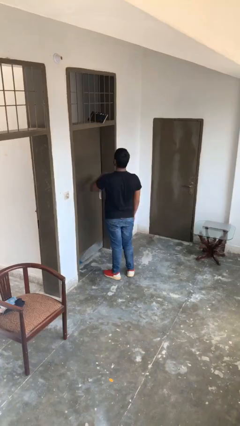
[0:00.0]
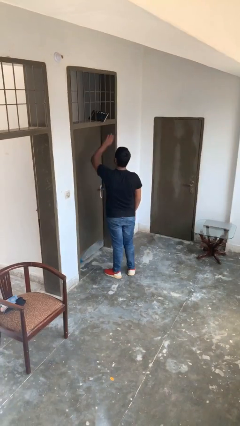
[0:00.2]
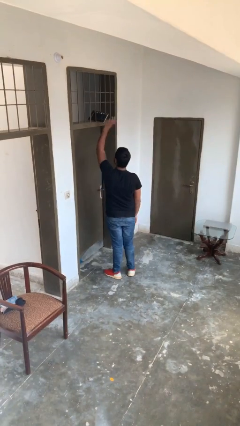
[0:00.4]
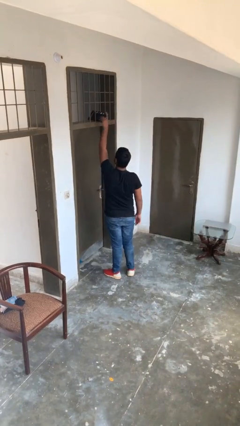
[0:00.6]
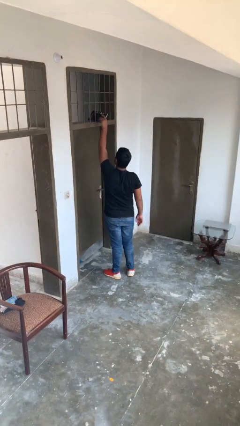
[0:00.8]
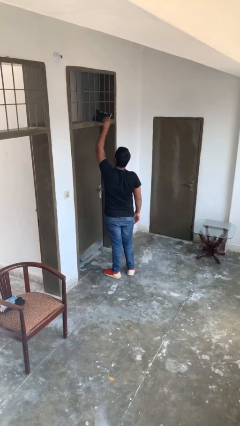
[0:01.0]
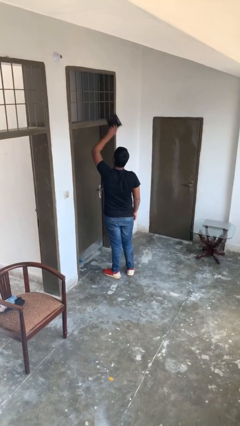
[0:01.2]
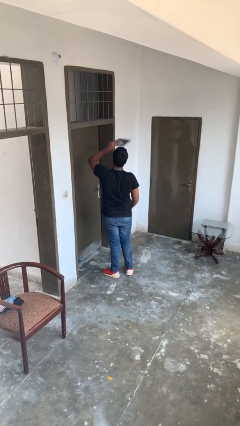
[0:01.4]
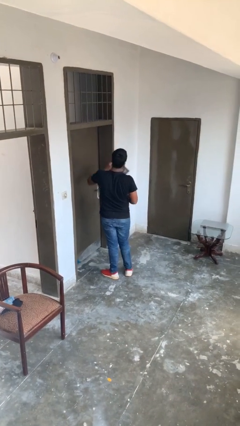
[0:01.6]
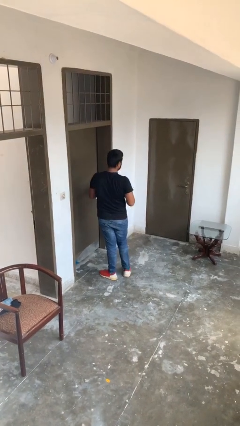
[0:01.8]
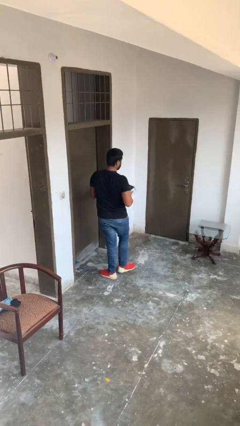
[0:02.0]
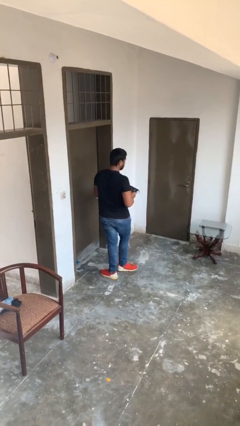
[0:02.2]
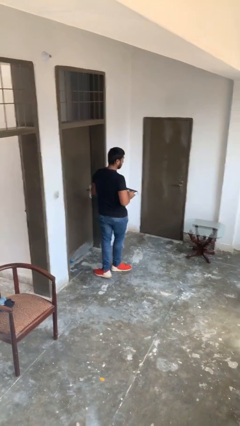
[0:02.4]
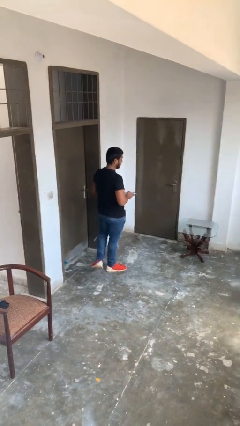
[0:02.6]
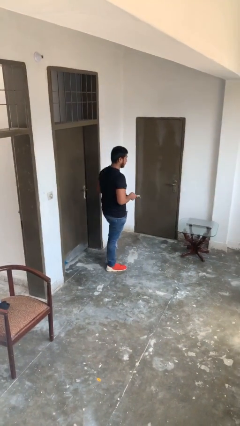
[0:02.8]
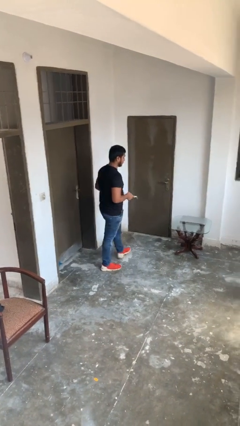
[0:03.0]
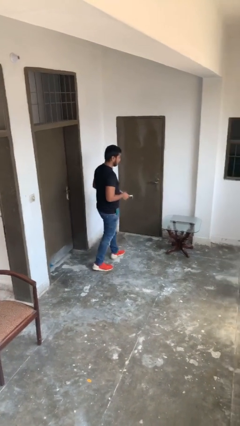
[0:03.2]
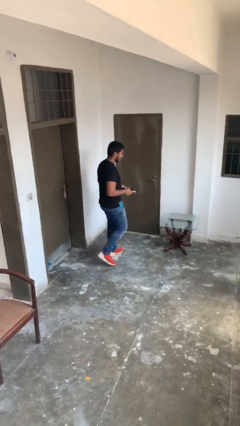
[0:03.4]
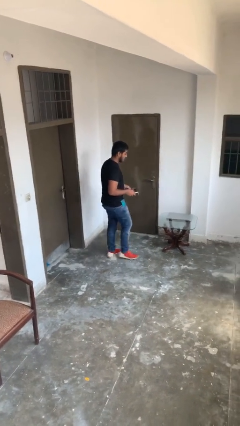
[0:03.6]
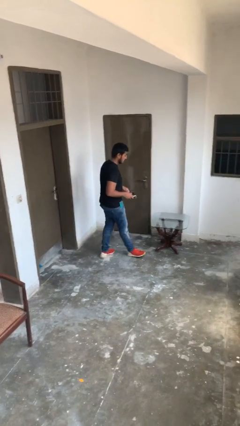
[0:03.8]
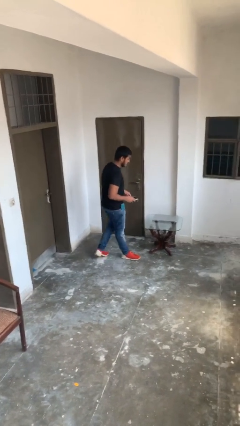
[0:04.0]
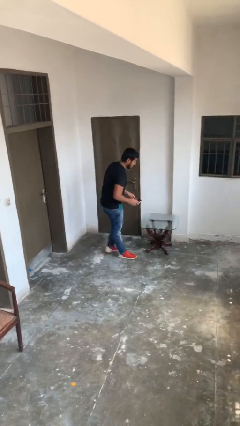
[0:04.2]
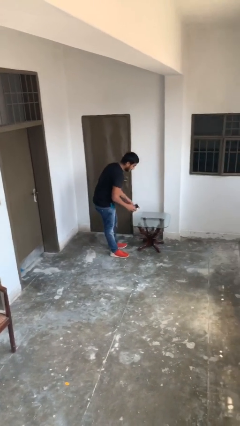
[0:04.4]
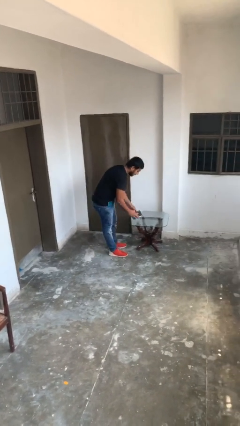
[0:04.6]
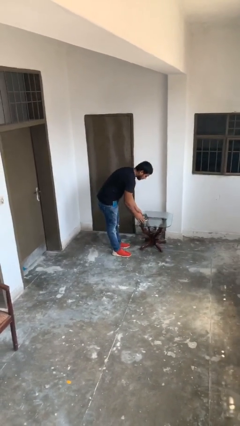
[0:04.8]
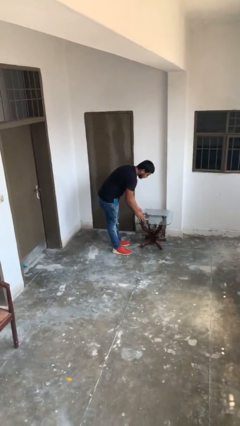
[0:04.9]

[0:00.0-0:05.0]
person picks up object from shelf

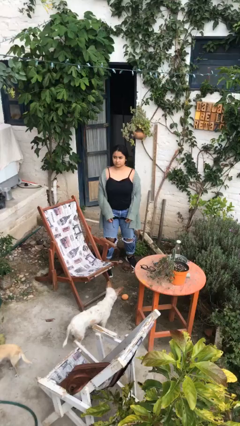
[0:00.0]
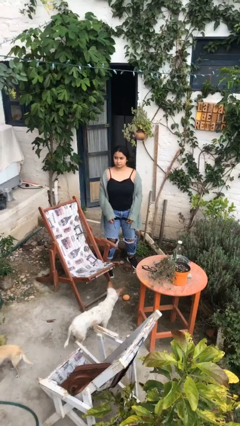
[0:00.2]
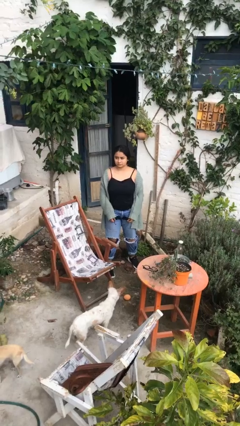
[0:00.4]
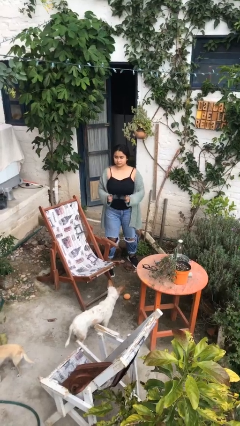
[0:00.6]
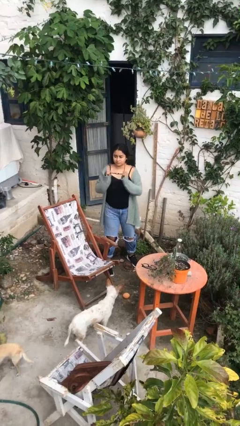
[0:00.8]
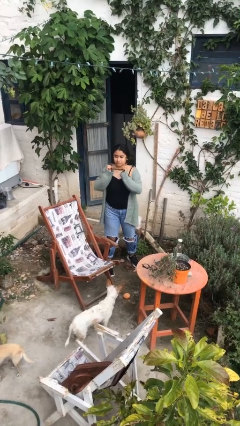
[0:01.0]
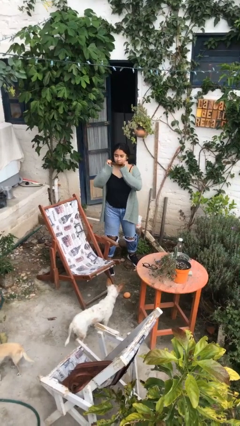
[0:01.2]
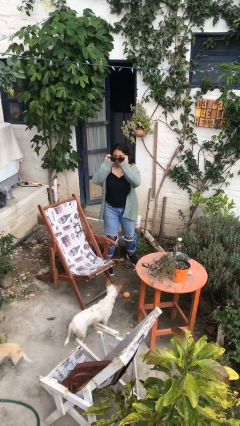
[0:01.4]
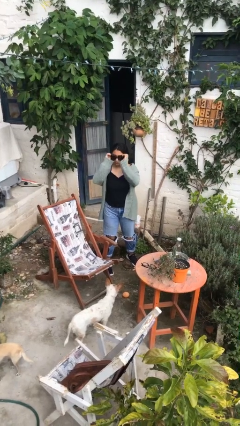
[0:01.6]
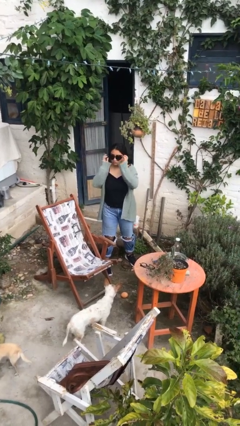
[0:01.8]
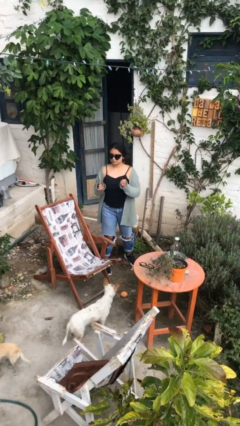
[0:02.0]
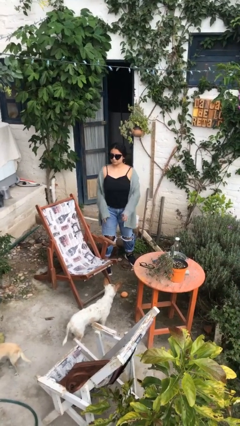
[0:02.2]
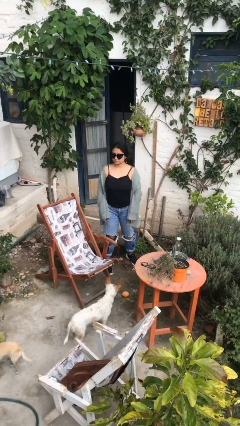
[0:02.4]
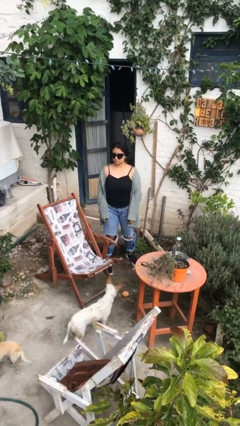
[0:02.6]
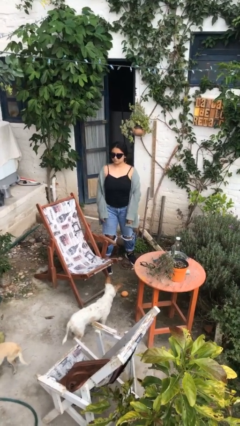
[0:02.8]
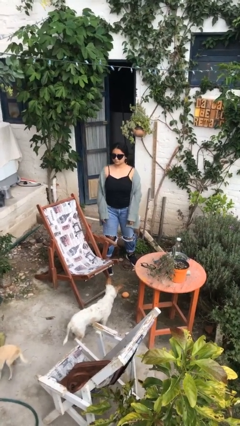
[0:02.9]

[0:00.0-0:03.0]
person puts on sunglasses

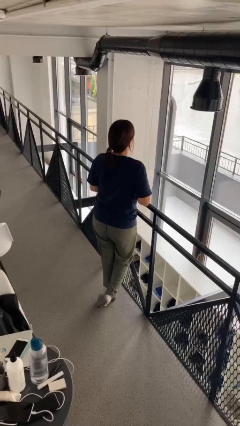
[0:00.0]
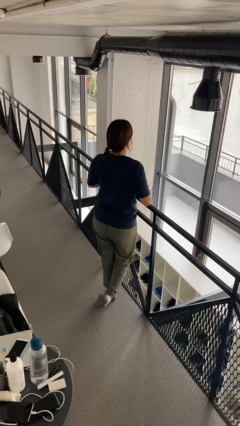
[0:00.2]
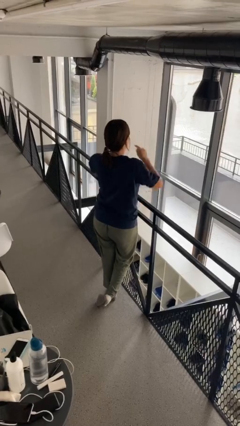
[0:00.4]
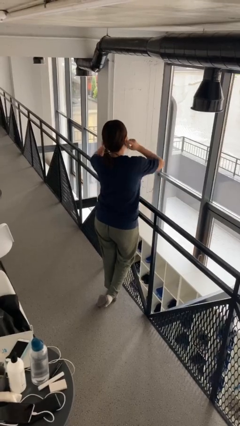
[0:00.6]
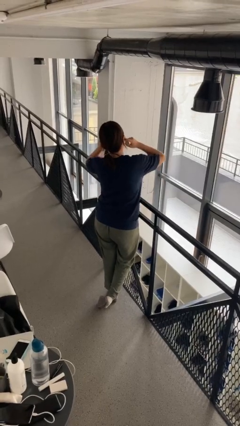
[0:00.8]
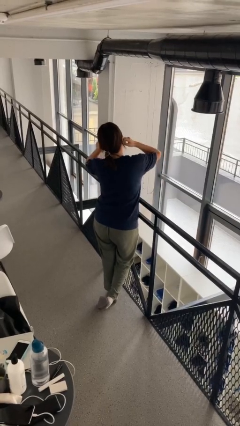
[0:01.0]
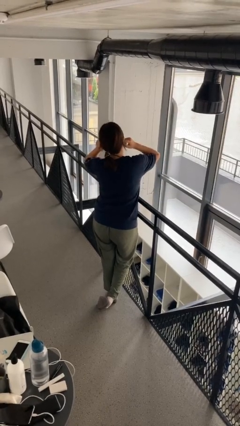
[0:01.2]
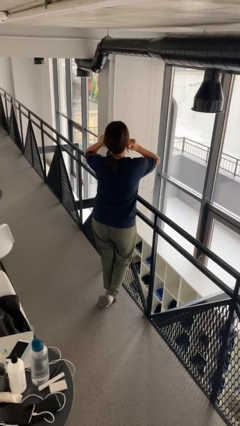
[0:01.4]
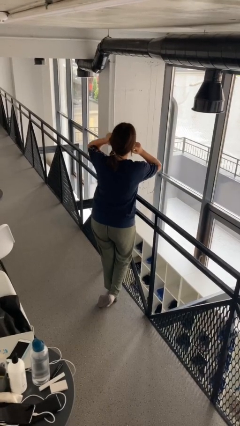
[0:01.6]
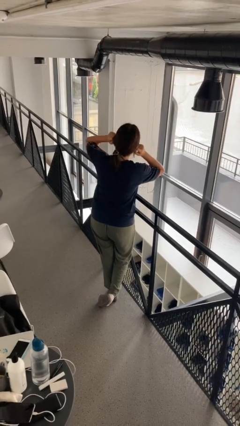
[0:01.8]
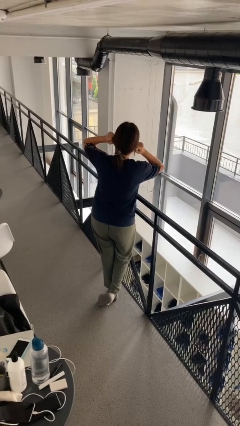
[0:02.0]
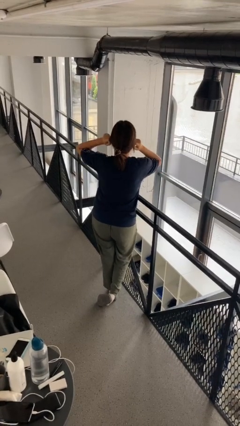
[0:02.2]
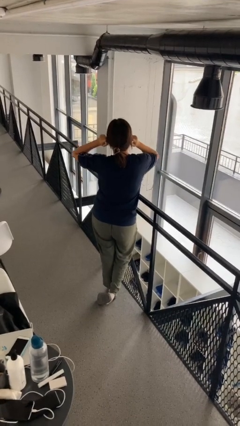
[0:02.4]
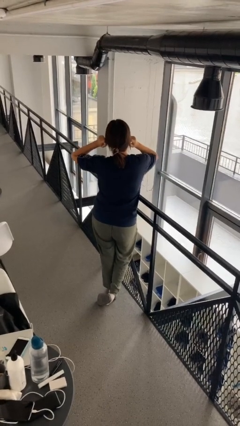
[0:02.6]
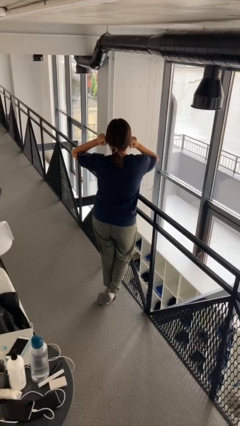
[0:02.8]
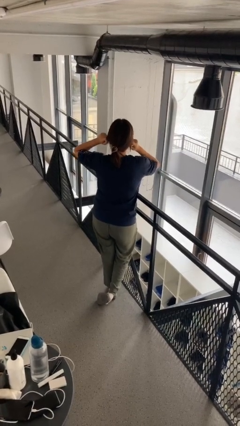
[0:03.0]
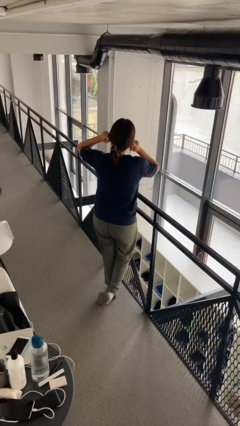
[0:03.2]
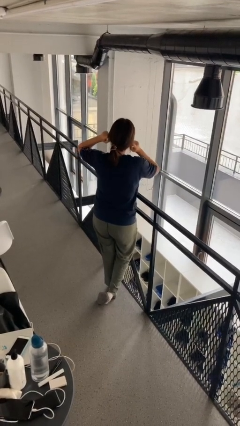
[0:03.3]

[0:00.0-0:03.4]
person puts fingers in ear

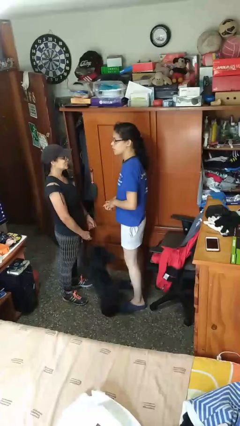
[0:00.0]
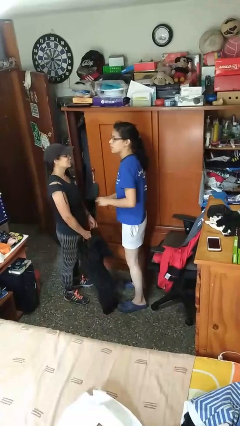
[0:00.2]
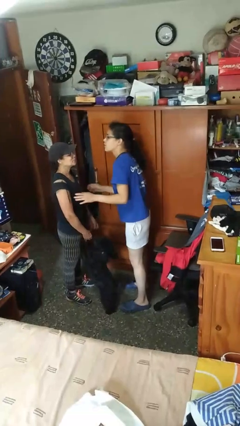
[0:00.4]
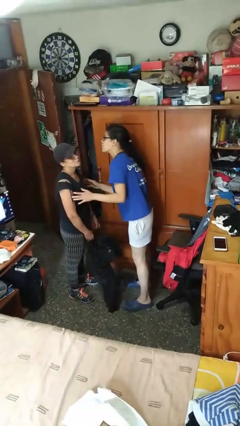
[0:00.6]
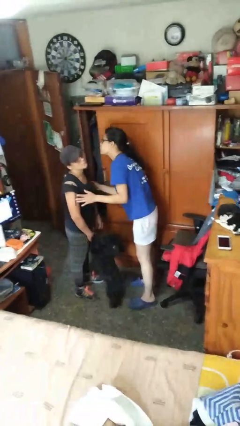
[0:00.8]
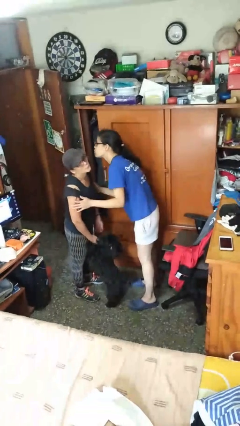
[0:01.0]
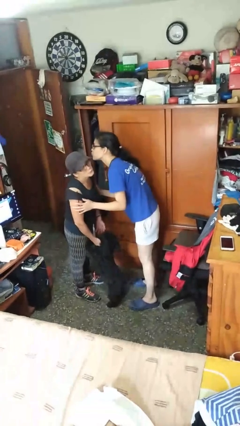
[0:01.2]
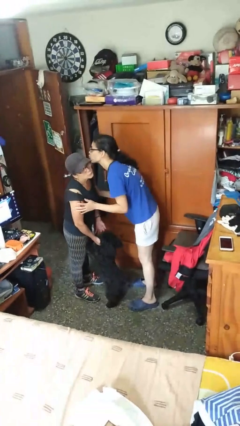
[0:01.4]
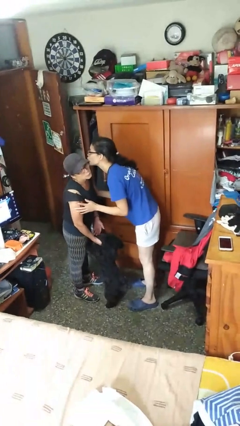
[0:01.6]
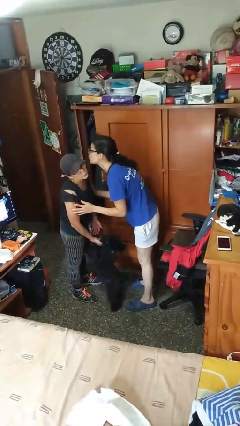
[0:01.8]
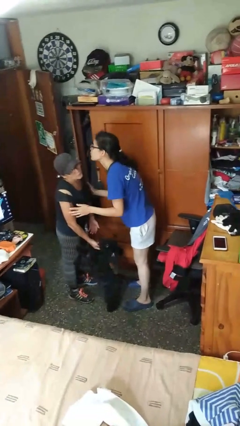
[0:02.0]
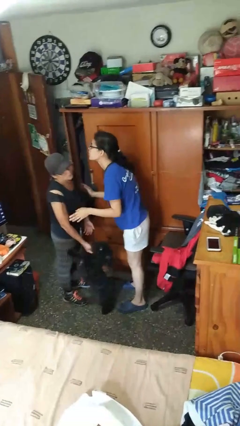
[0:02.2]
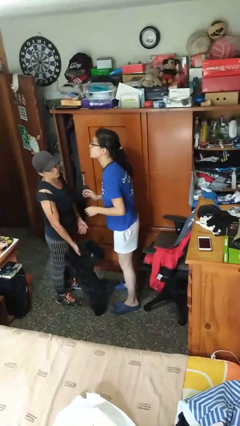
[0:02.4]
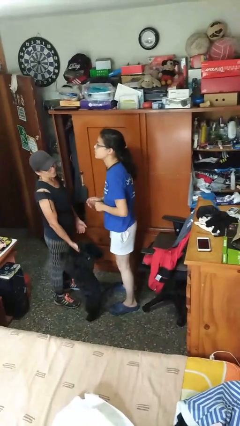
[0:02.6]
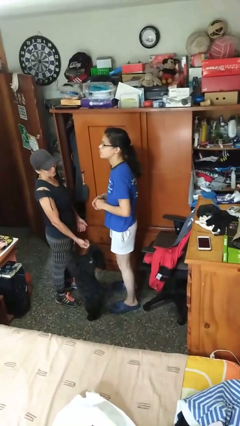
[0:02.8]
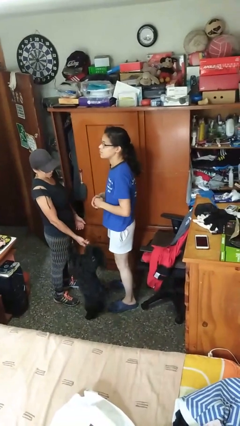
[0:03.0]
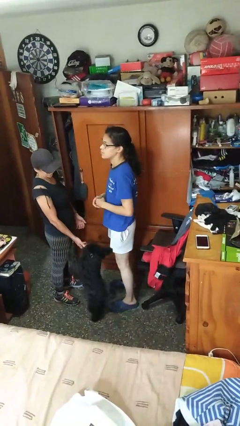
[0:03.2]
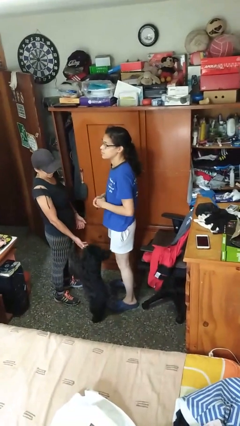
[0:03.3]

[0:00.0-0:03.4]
person kisses cheek of person

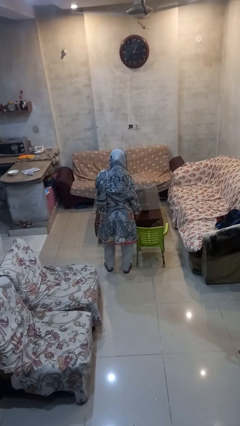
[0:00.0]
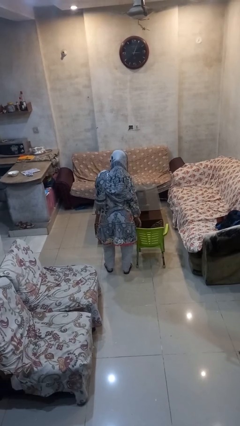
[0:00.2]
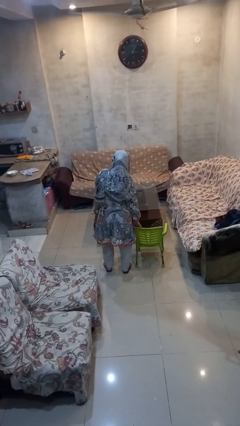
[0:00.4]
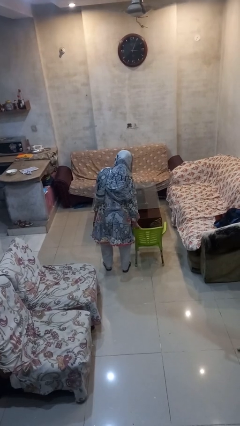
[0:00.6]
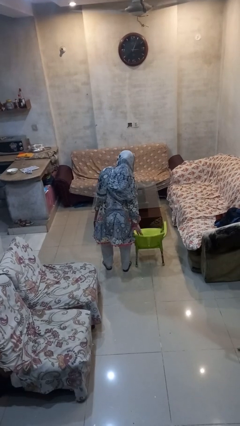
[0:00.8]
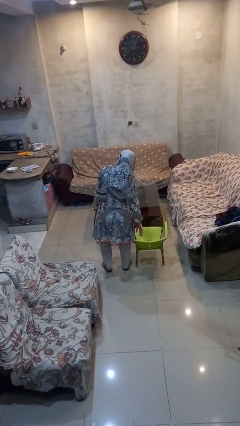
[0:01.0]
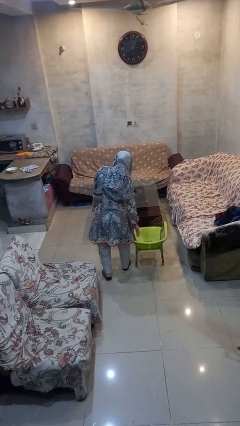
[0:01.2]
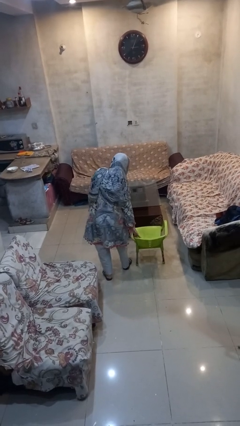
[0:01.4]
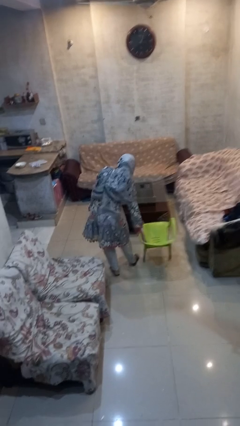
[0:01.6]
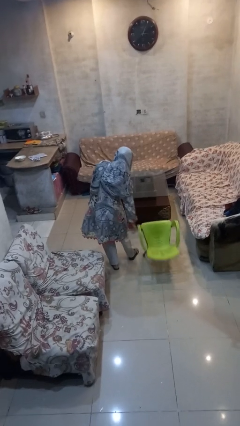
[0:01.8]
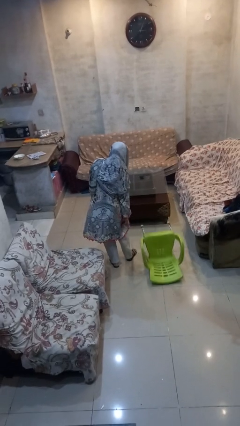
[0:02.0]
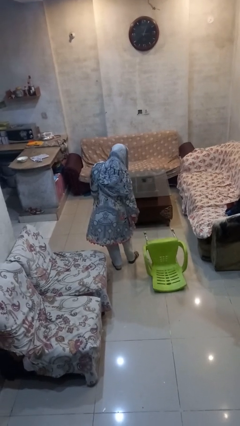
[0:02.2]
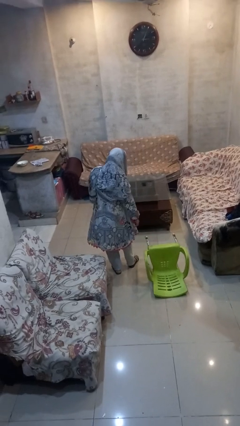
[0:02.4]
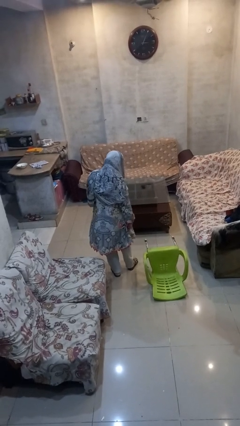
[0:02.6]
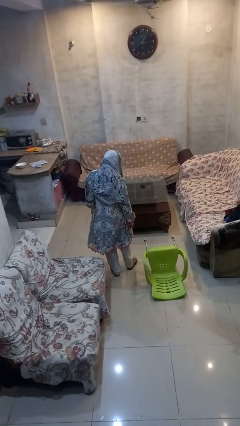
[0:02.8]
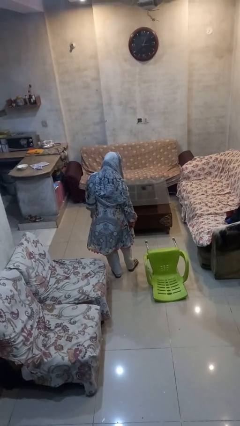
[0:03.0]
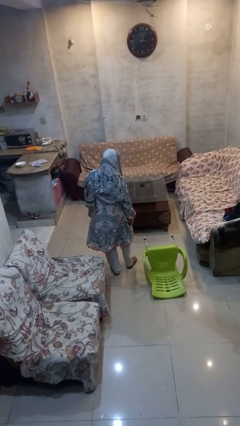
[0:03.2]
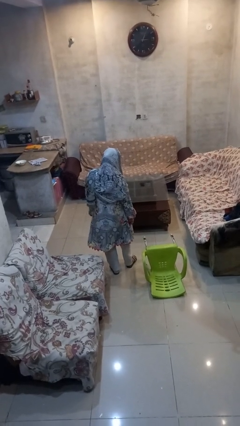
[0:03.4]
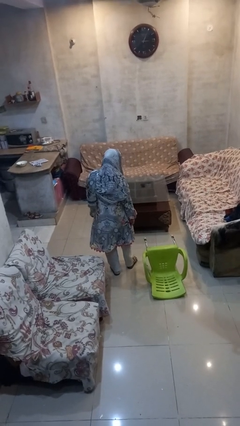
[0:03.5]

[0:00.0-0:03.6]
person knocks over furniture
